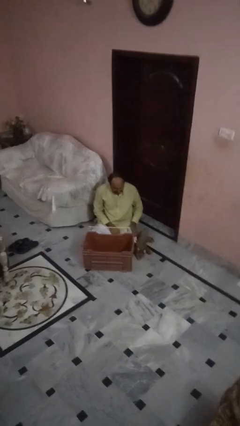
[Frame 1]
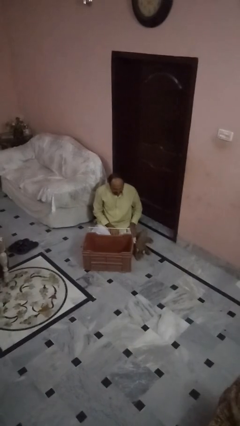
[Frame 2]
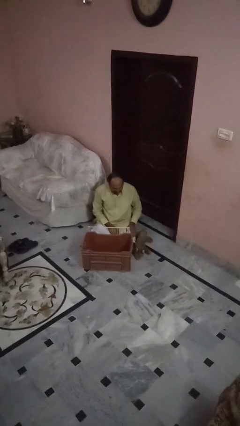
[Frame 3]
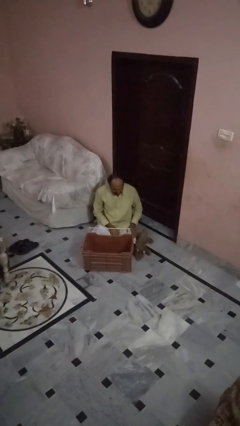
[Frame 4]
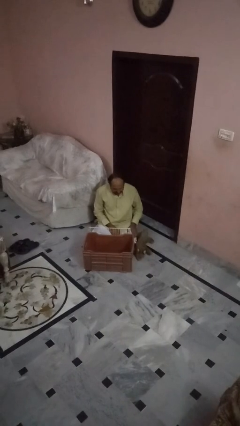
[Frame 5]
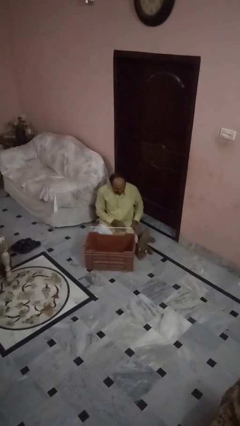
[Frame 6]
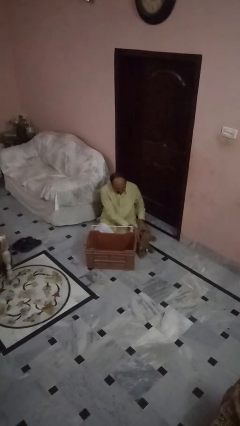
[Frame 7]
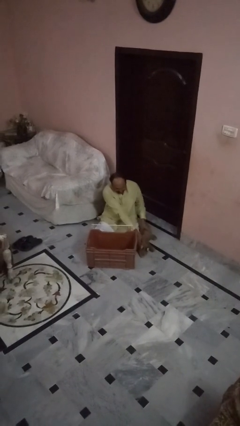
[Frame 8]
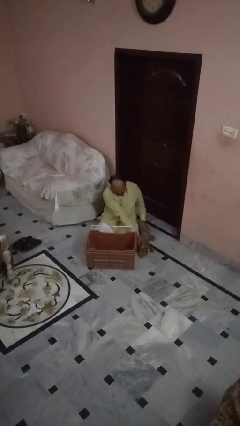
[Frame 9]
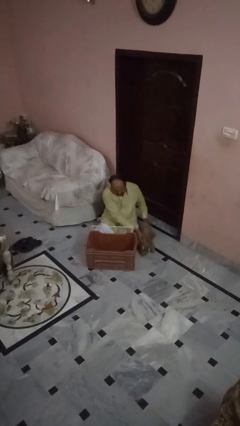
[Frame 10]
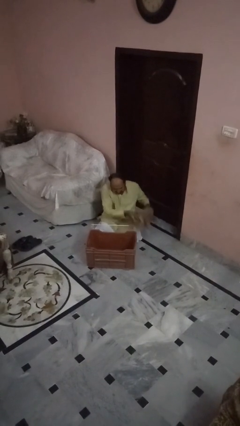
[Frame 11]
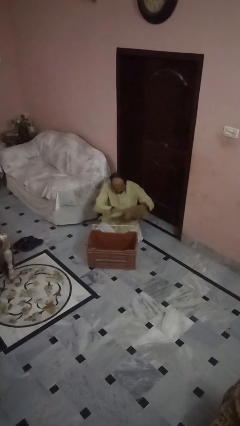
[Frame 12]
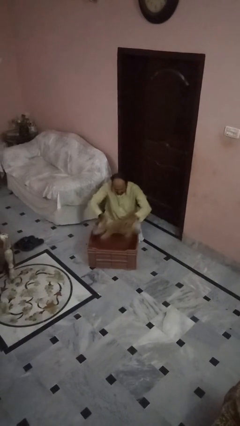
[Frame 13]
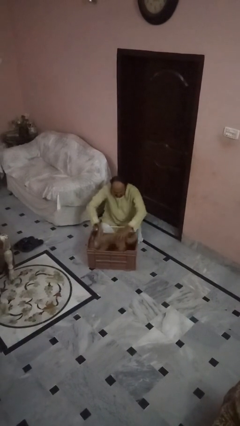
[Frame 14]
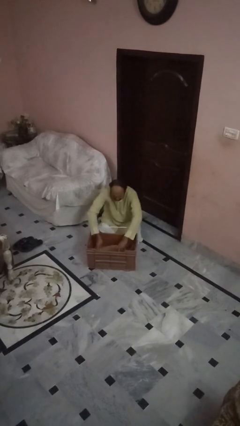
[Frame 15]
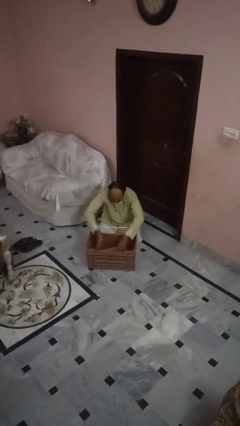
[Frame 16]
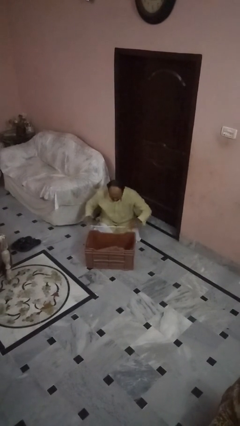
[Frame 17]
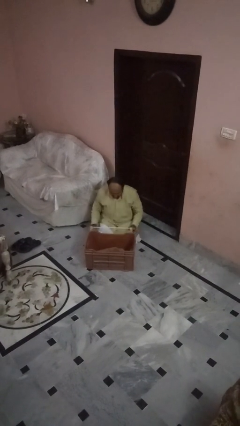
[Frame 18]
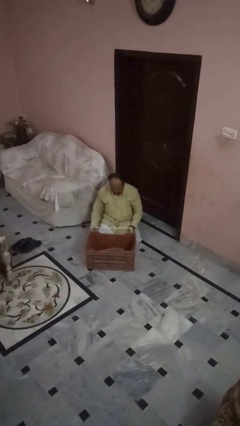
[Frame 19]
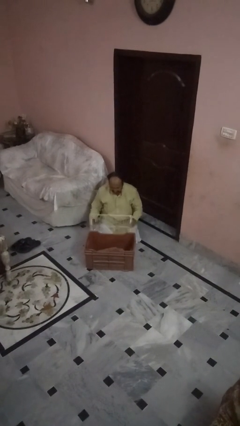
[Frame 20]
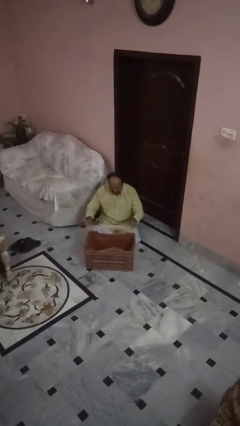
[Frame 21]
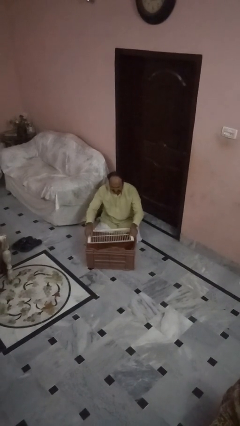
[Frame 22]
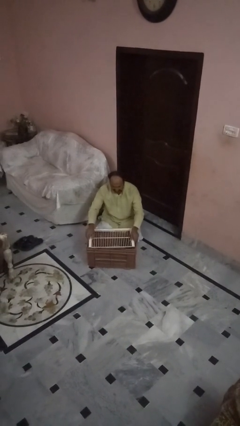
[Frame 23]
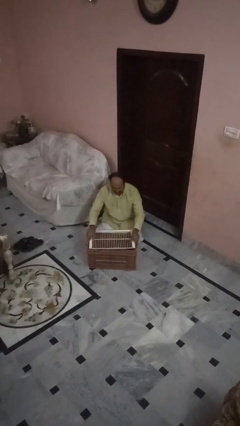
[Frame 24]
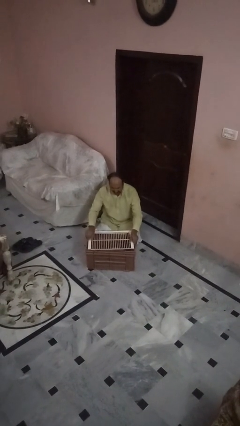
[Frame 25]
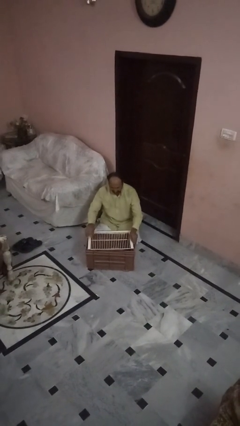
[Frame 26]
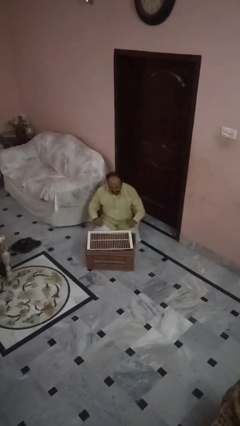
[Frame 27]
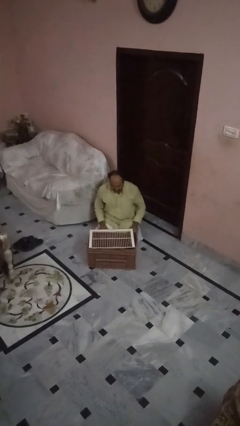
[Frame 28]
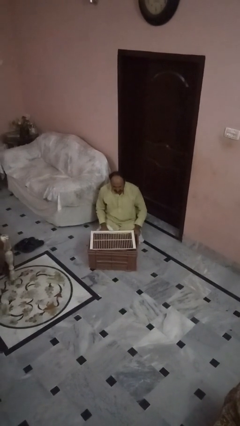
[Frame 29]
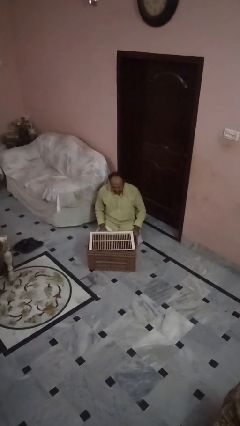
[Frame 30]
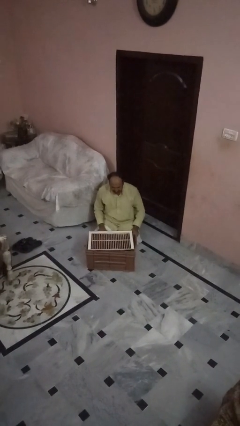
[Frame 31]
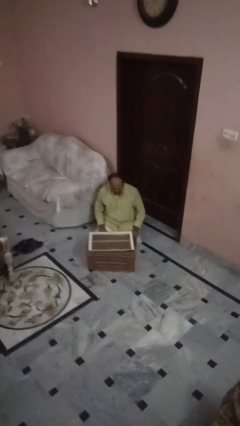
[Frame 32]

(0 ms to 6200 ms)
person crates dog

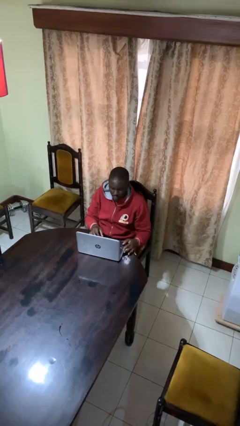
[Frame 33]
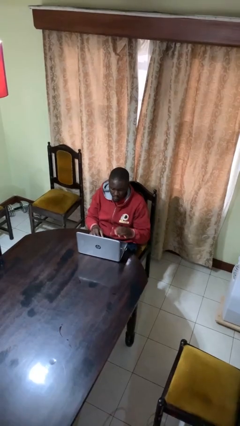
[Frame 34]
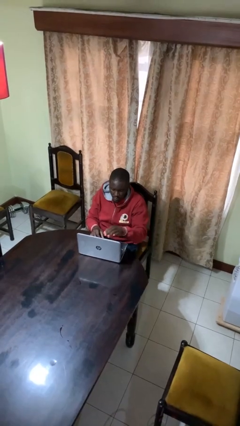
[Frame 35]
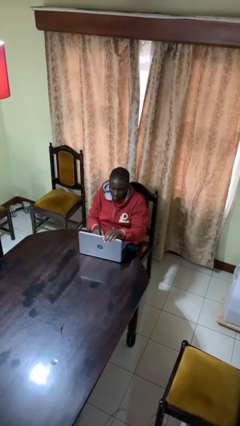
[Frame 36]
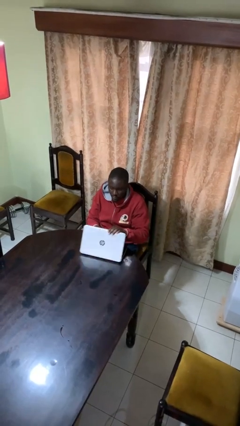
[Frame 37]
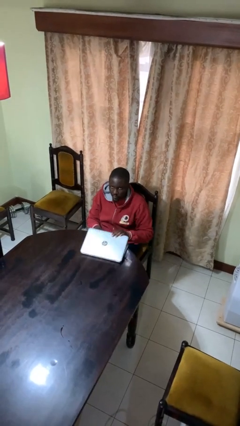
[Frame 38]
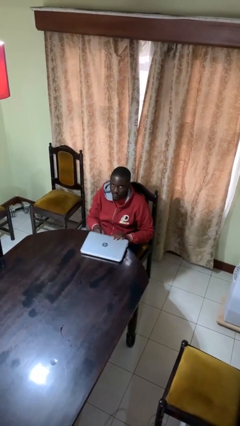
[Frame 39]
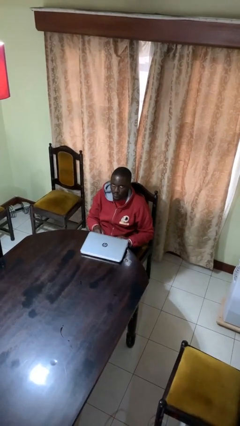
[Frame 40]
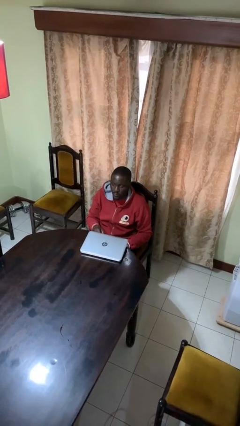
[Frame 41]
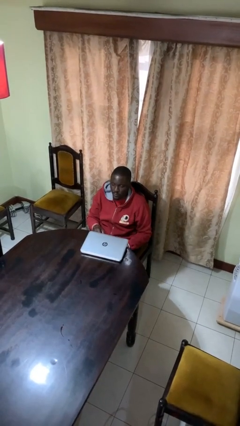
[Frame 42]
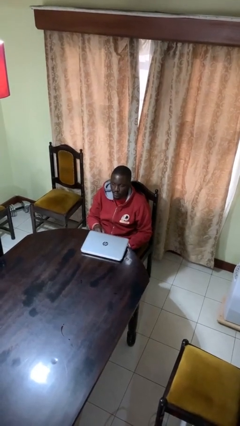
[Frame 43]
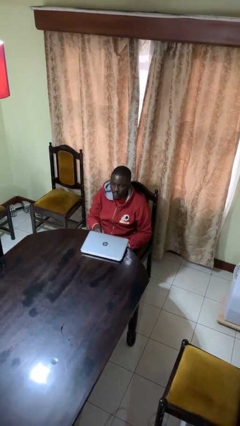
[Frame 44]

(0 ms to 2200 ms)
person closes laptop

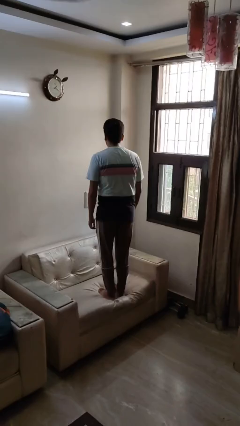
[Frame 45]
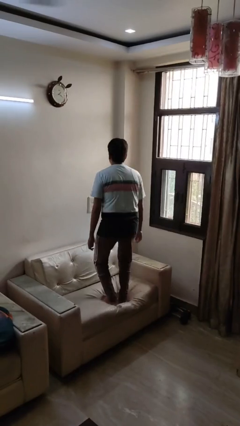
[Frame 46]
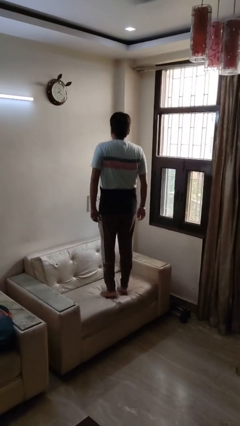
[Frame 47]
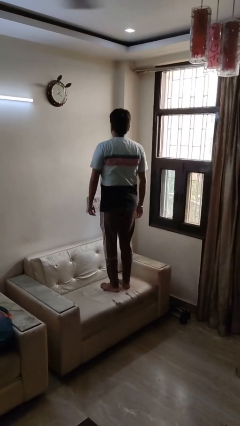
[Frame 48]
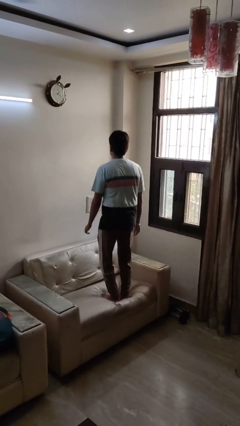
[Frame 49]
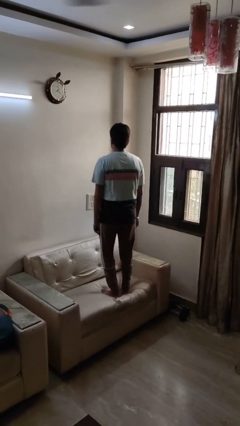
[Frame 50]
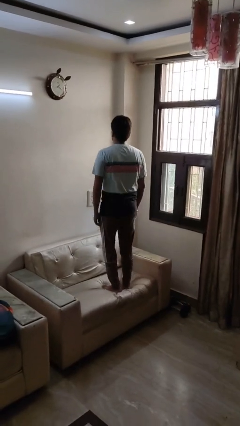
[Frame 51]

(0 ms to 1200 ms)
person jumps on couch

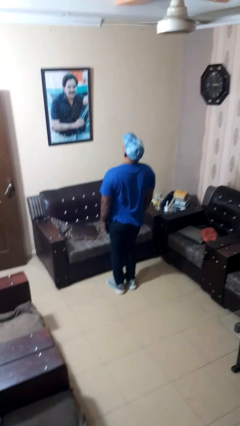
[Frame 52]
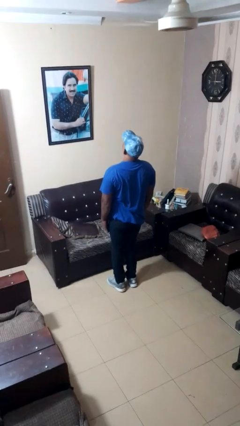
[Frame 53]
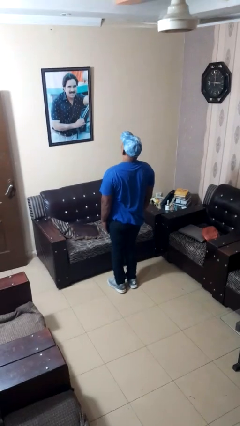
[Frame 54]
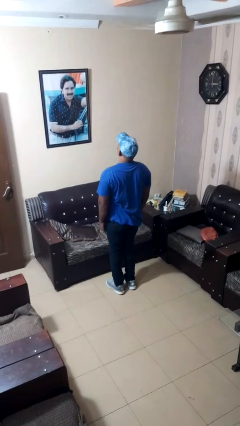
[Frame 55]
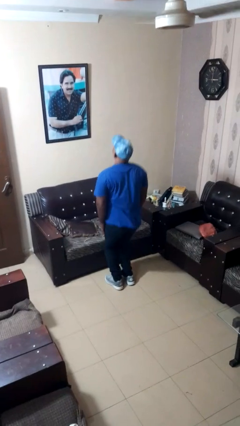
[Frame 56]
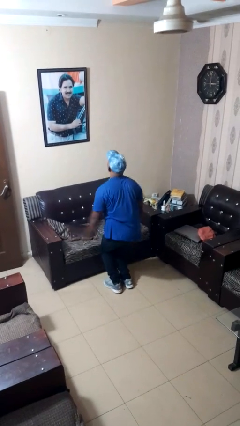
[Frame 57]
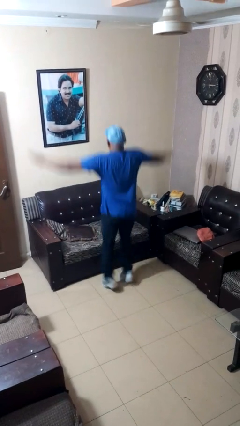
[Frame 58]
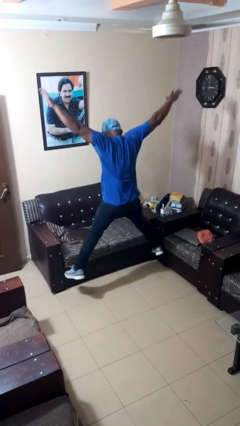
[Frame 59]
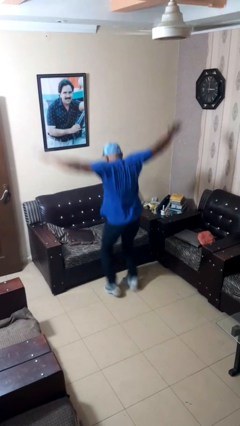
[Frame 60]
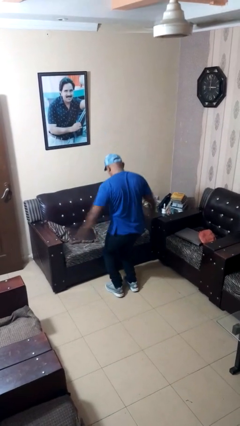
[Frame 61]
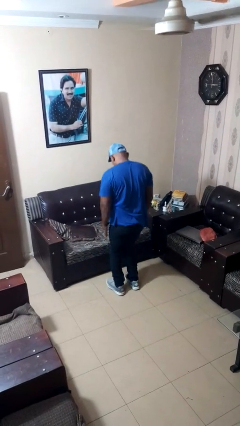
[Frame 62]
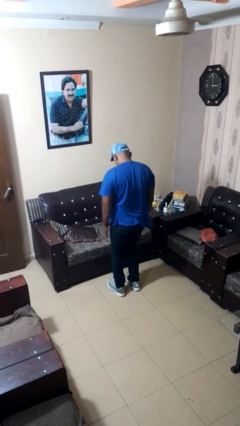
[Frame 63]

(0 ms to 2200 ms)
person exercises with jumping jacks

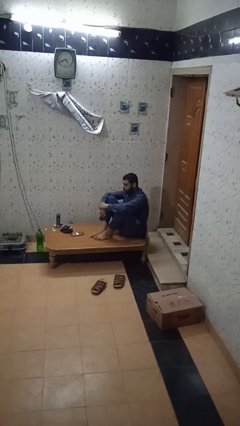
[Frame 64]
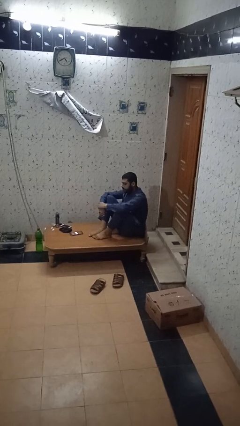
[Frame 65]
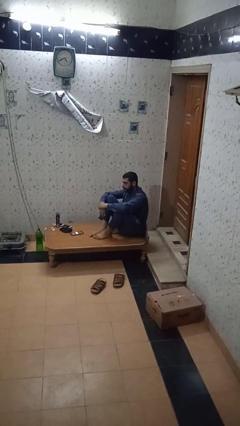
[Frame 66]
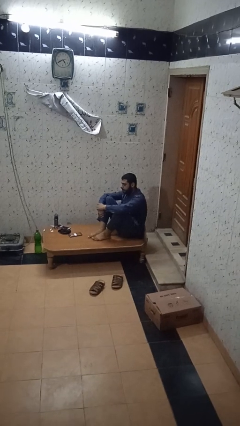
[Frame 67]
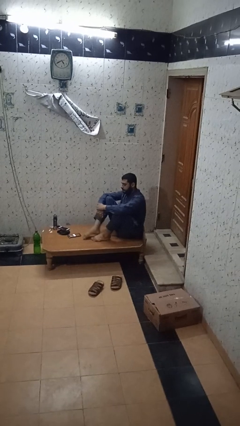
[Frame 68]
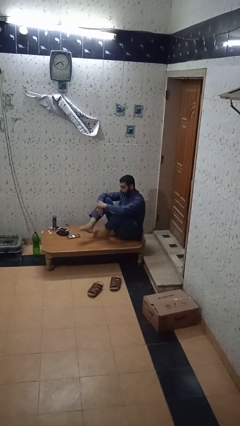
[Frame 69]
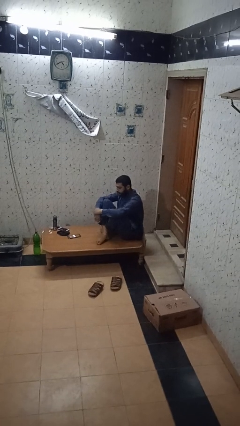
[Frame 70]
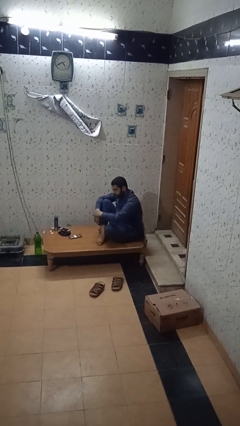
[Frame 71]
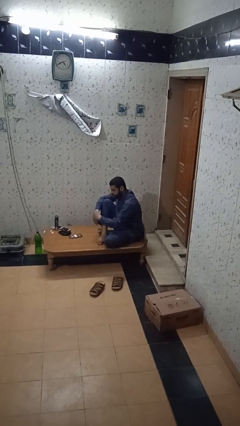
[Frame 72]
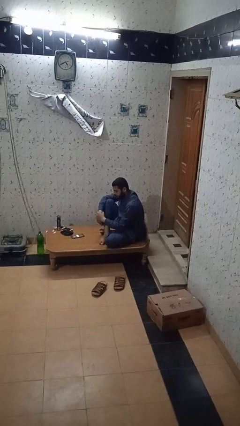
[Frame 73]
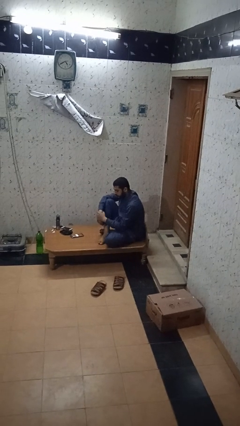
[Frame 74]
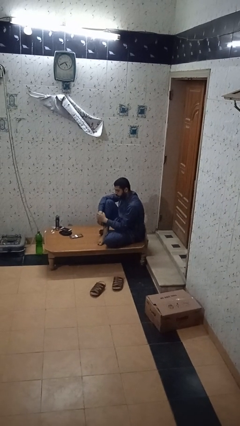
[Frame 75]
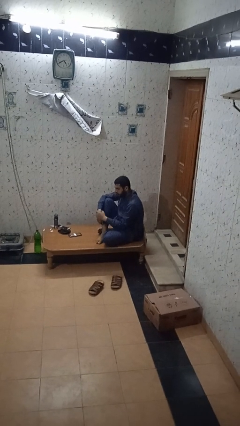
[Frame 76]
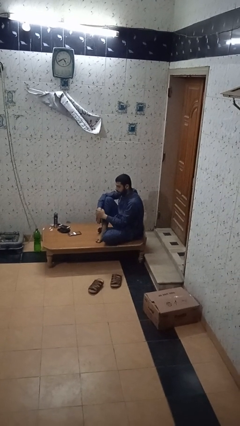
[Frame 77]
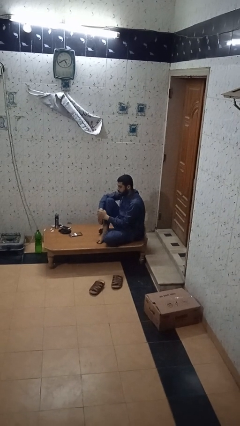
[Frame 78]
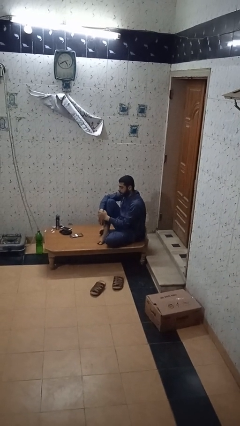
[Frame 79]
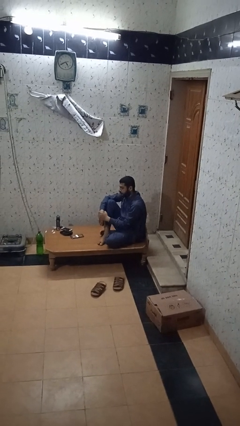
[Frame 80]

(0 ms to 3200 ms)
person crosses legs

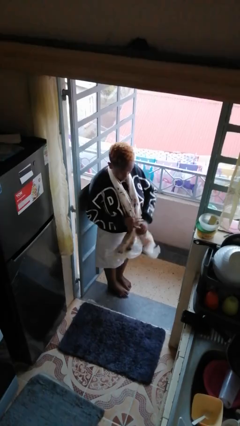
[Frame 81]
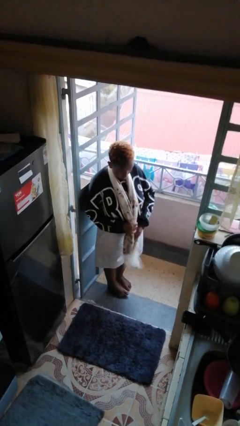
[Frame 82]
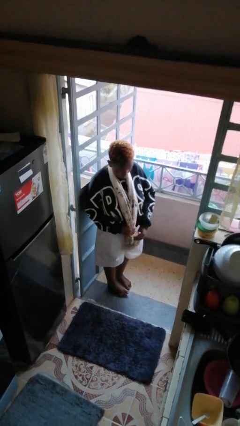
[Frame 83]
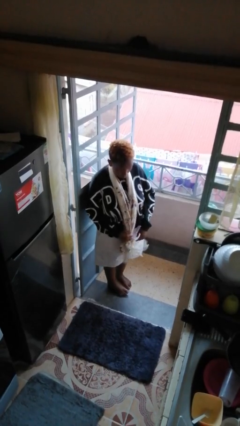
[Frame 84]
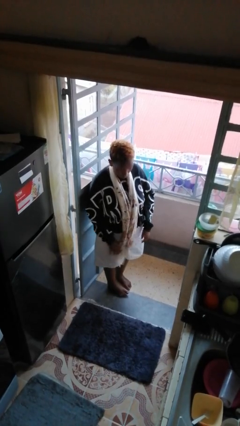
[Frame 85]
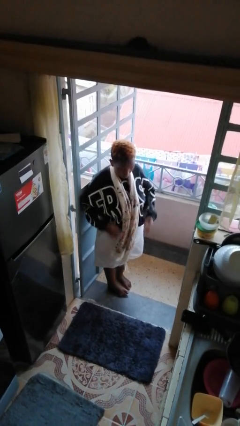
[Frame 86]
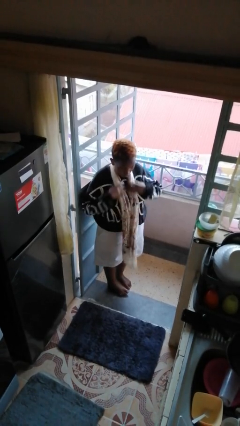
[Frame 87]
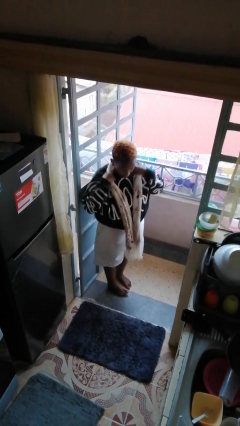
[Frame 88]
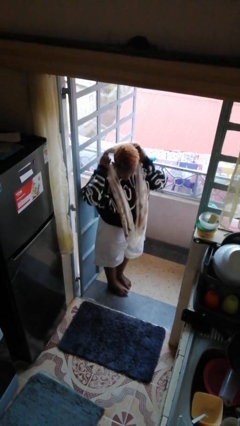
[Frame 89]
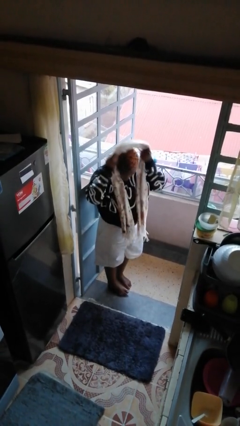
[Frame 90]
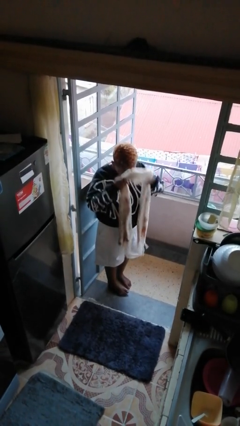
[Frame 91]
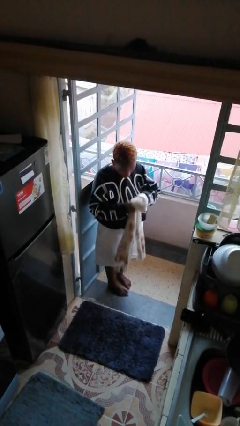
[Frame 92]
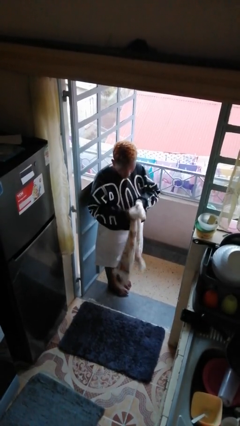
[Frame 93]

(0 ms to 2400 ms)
person takes off scarf

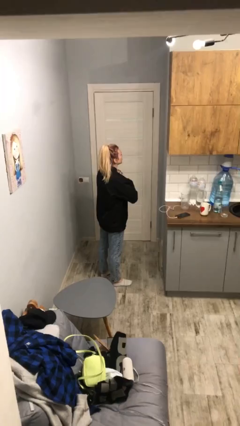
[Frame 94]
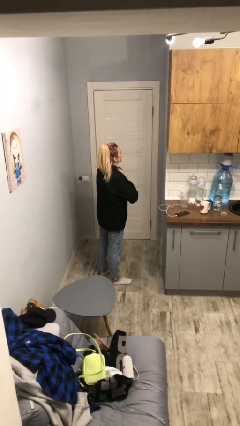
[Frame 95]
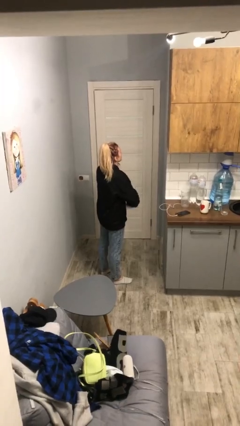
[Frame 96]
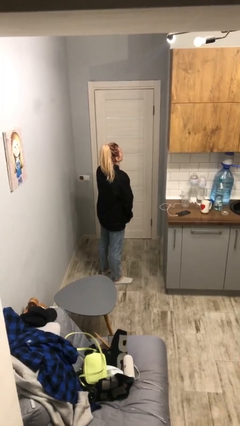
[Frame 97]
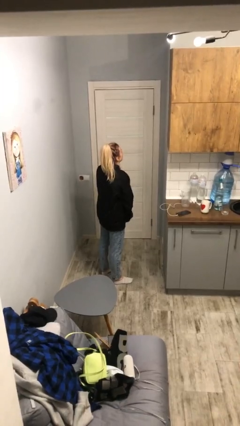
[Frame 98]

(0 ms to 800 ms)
person unzips jacket
